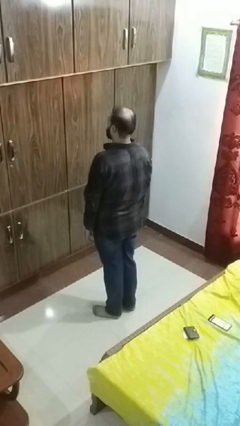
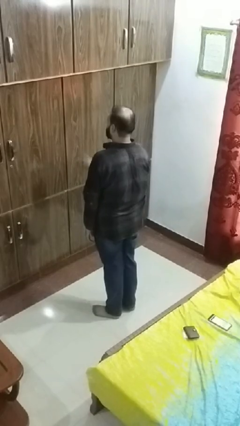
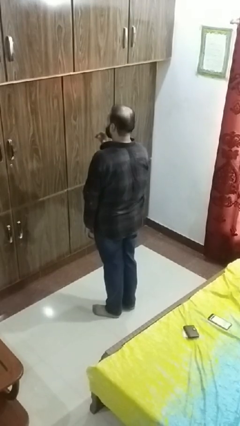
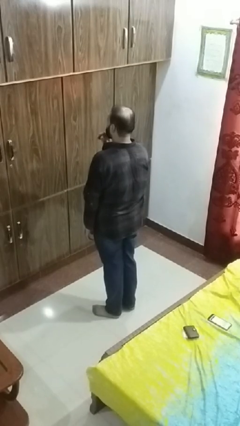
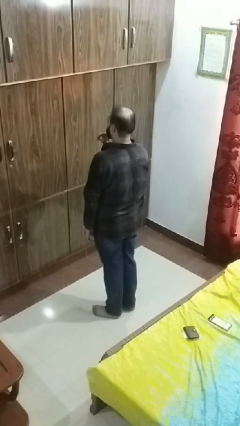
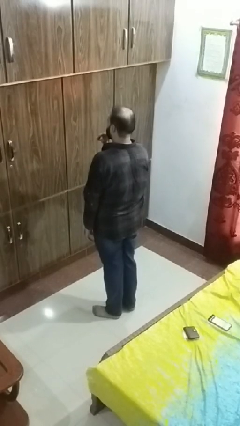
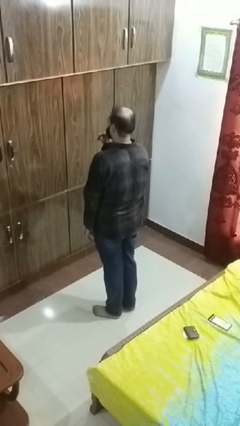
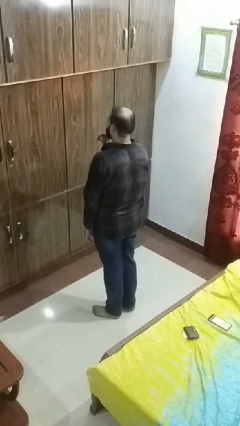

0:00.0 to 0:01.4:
person gestures be quiet

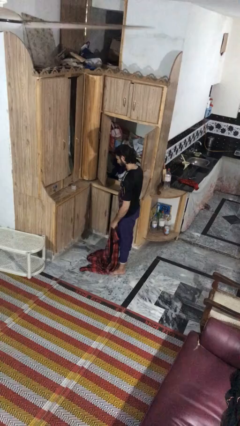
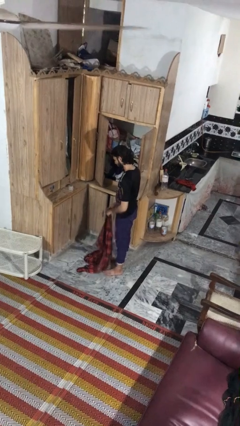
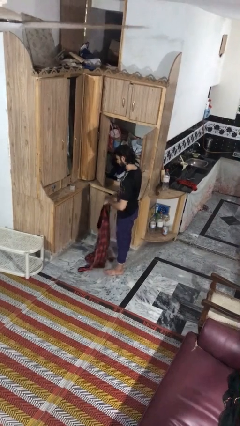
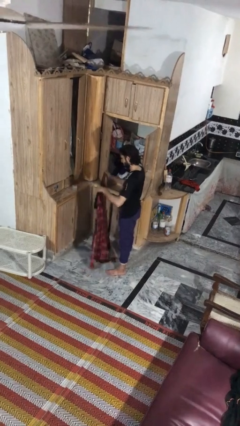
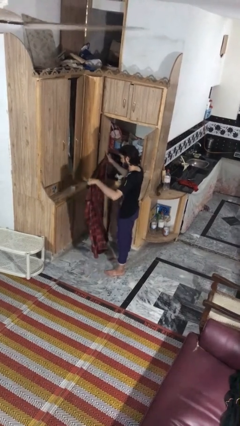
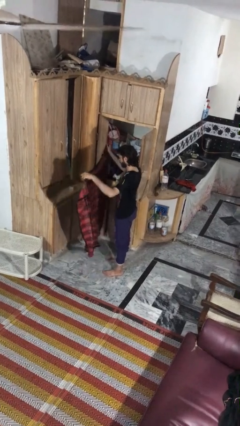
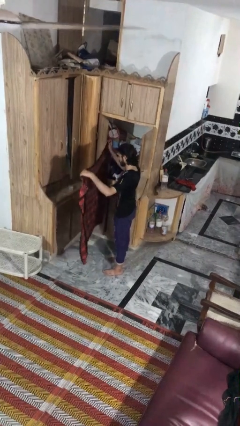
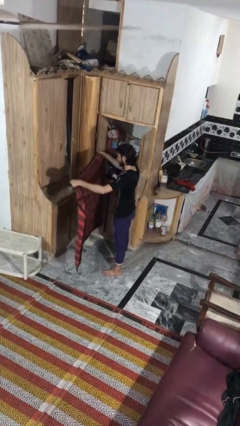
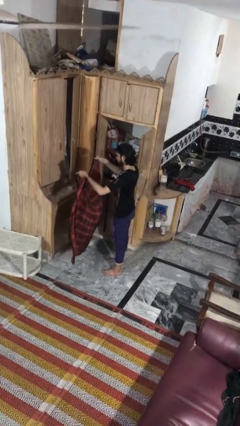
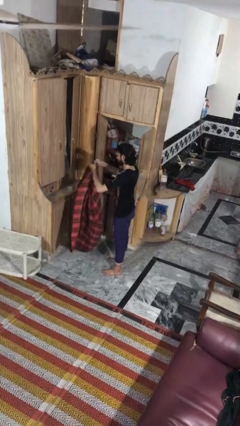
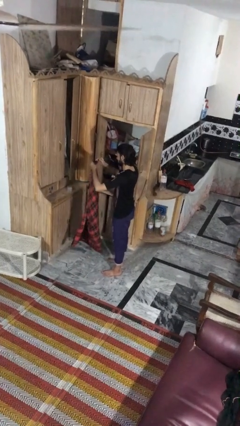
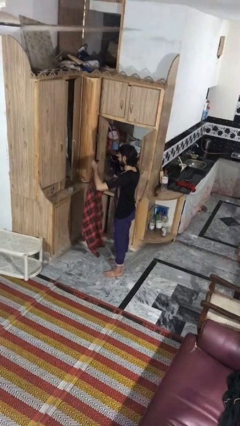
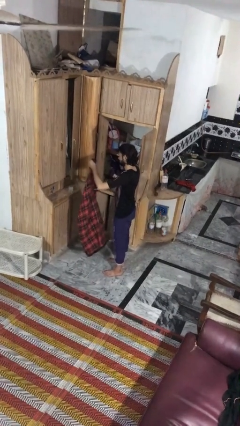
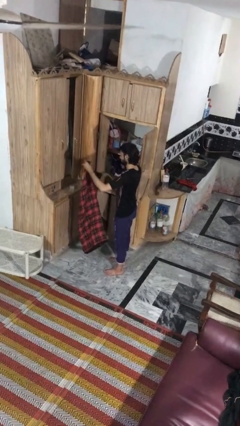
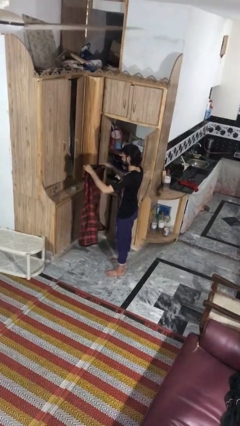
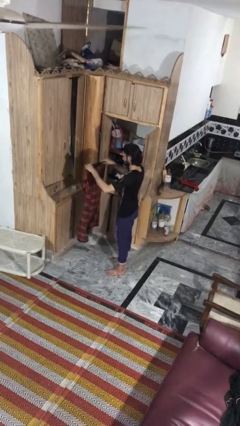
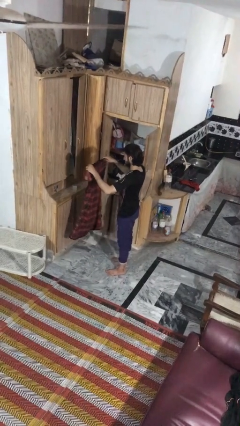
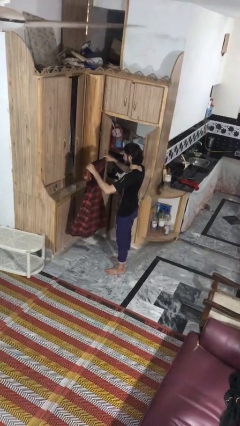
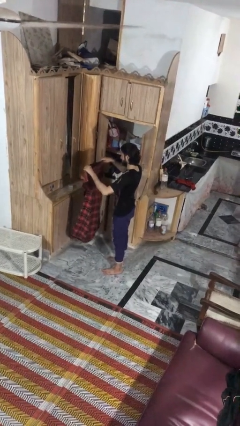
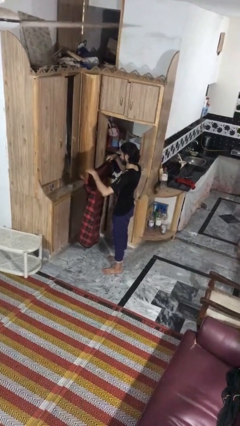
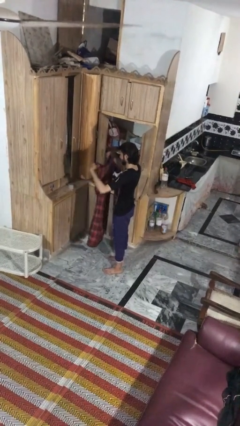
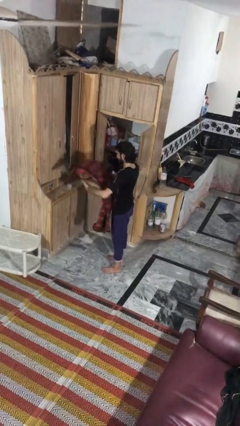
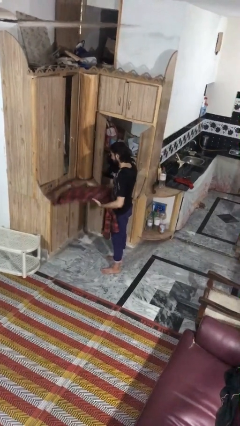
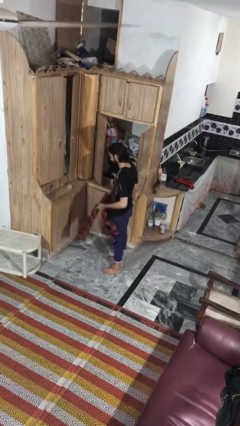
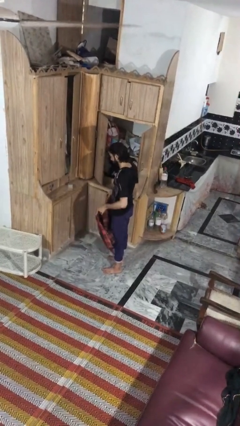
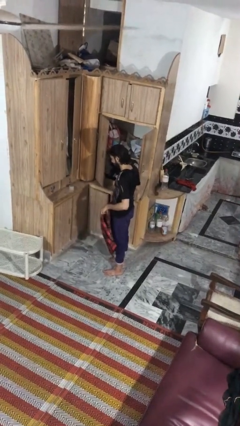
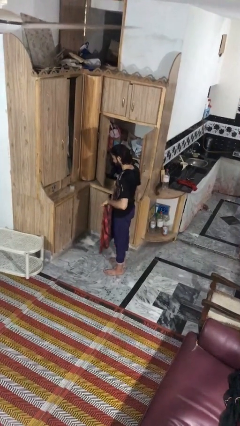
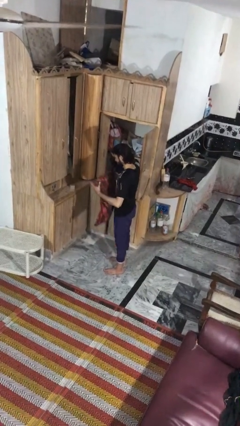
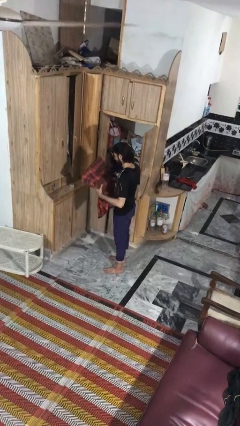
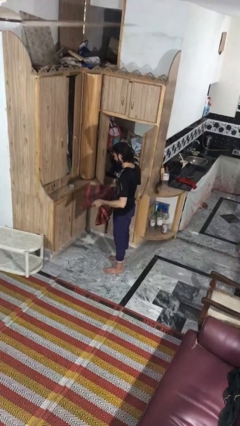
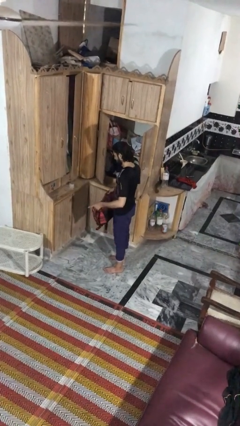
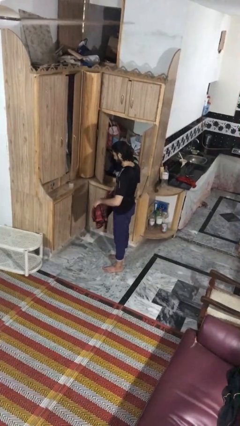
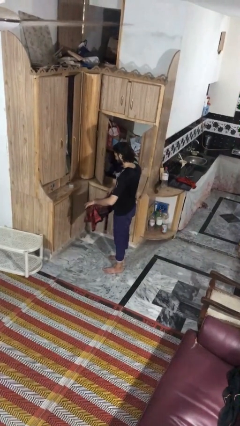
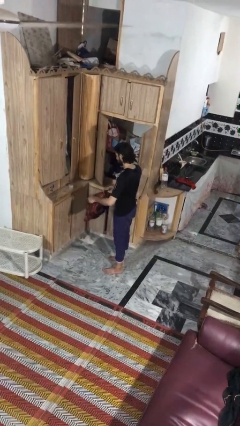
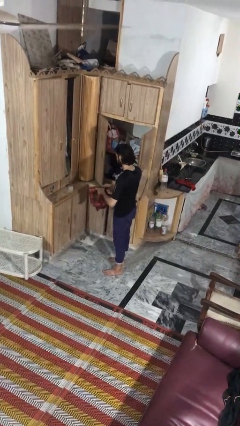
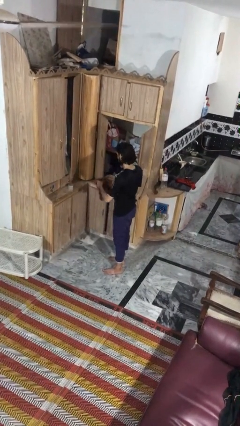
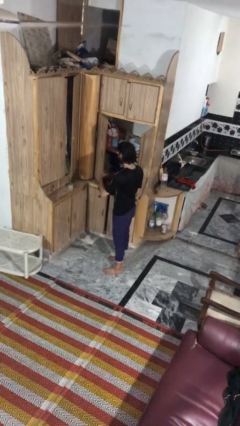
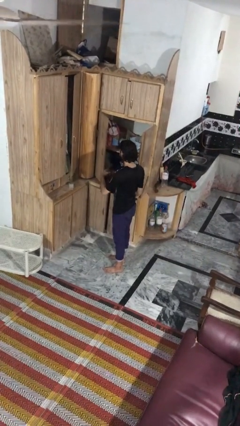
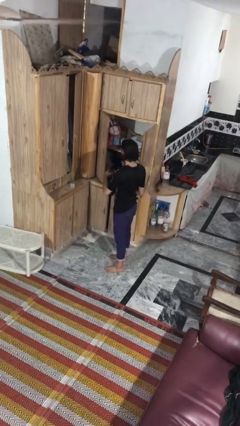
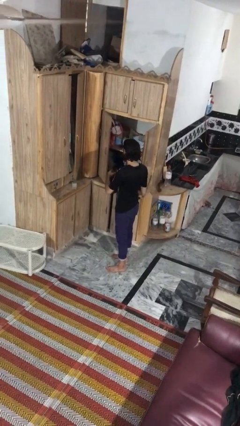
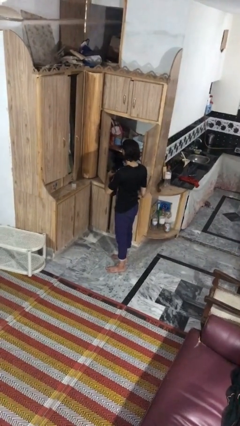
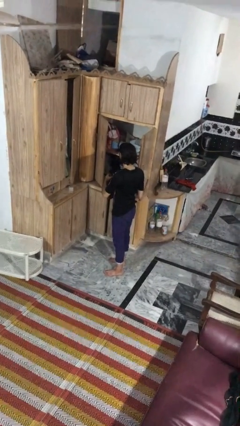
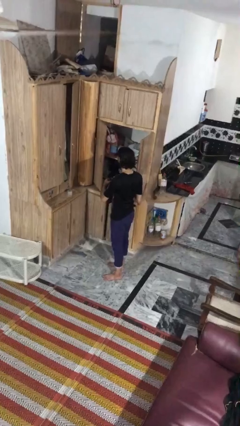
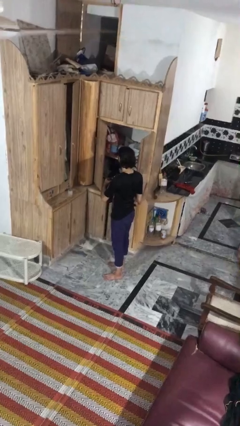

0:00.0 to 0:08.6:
person folds blanket

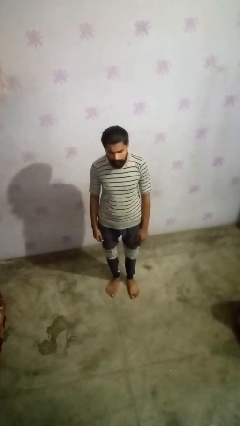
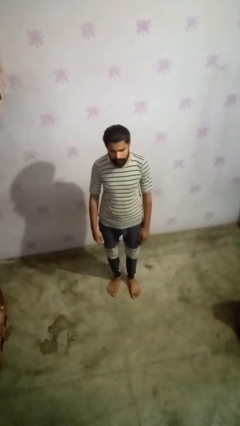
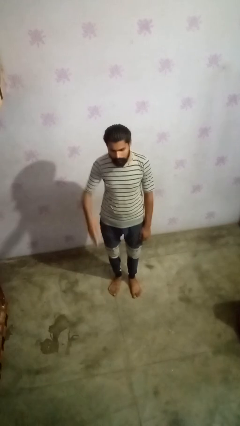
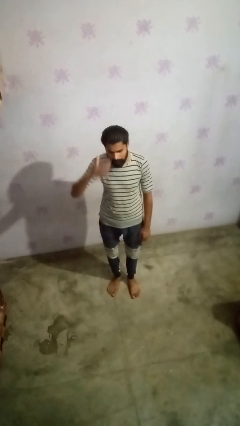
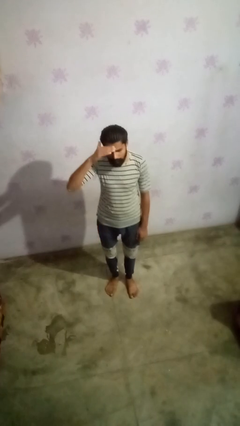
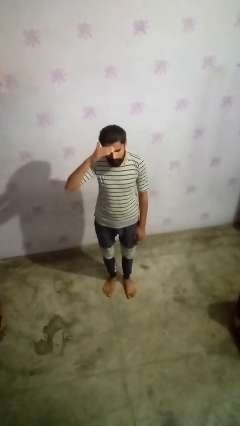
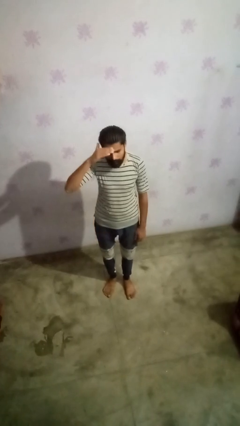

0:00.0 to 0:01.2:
person salutes

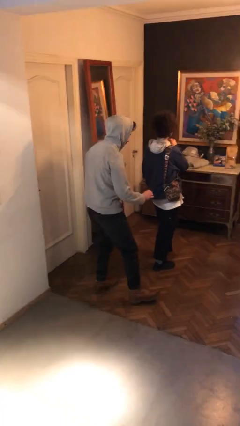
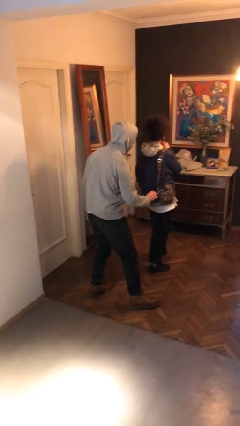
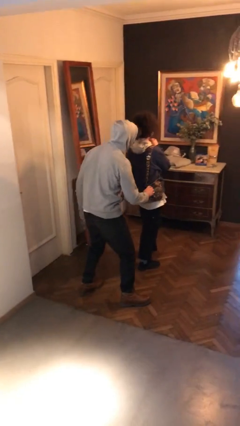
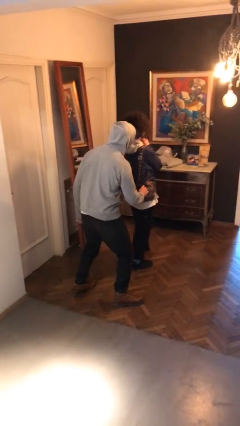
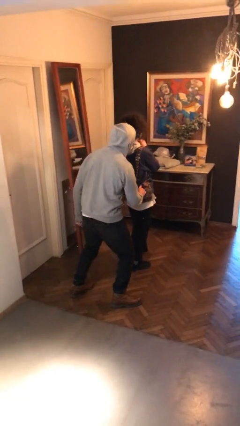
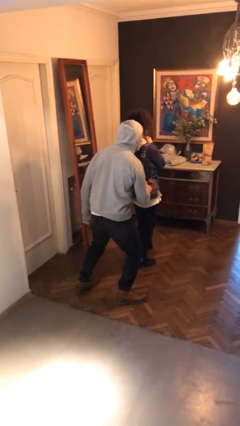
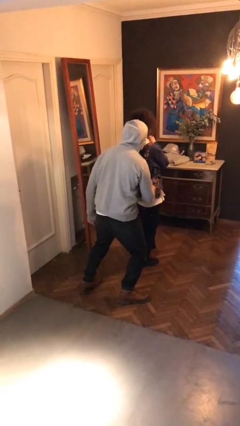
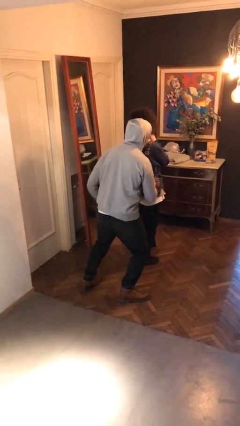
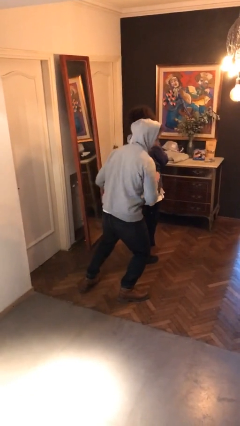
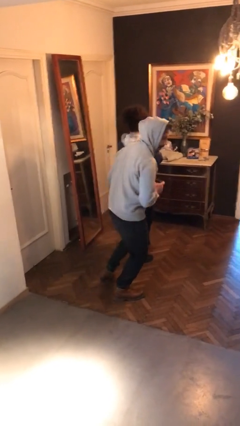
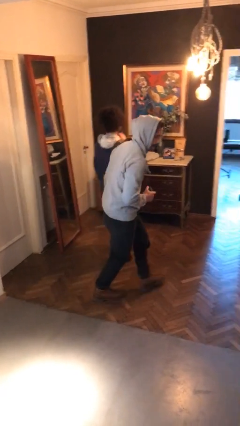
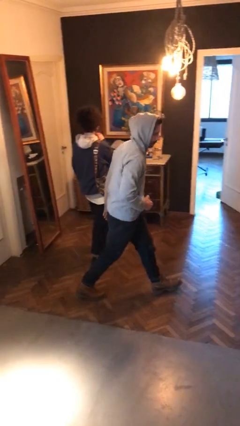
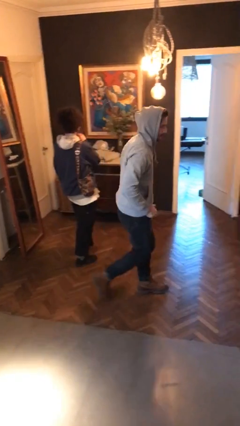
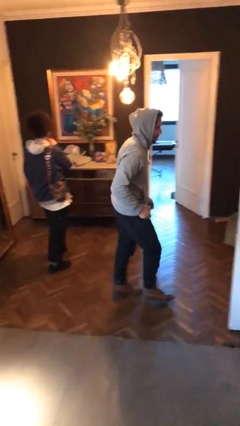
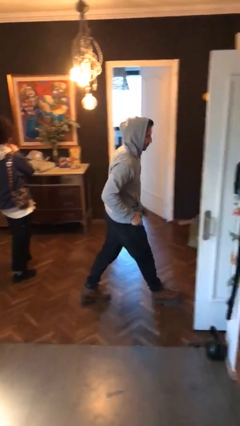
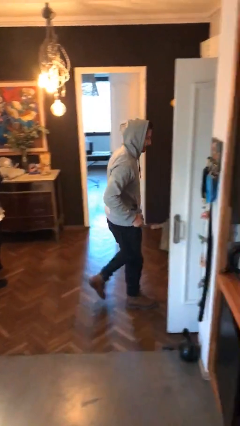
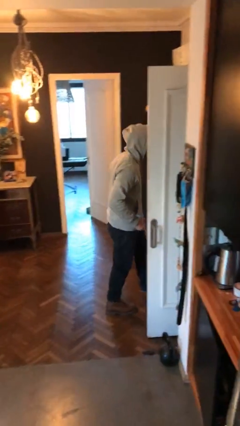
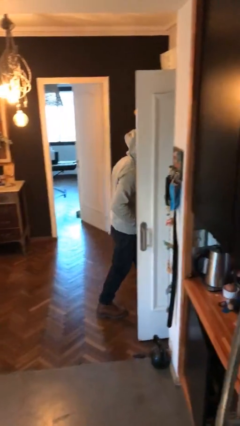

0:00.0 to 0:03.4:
person steals object from person

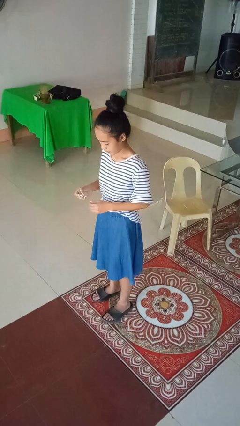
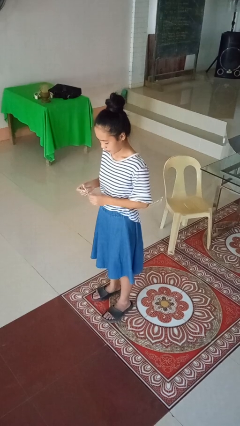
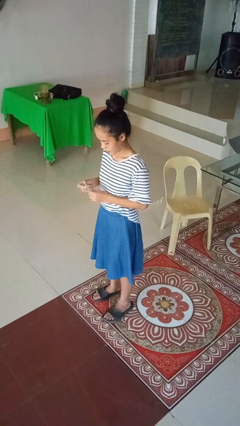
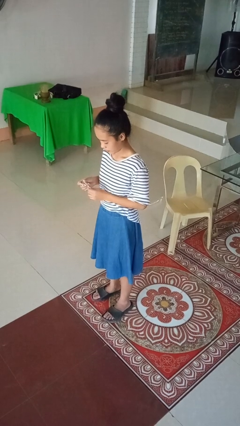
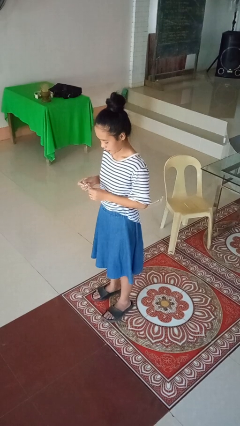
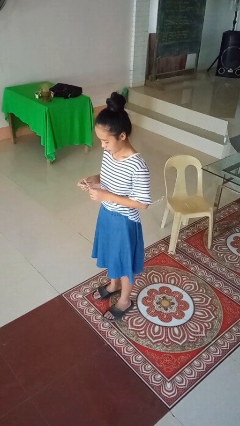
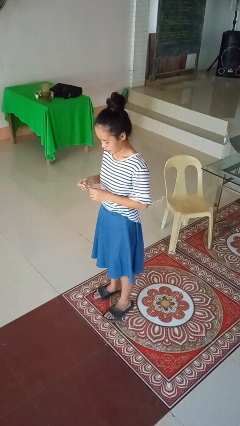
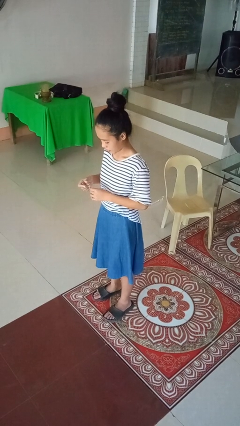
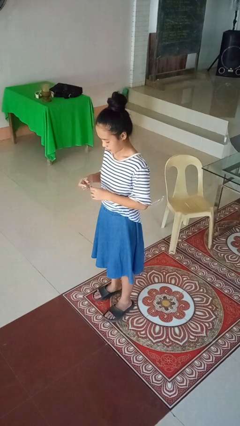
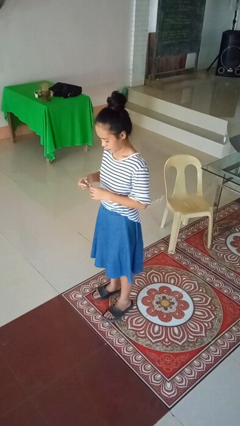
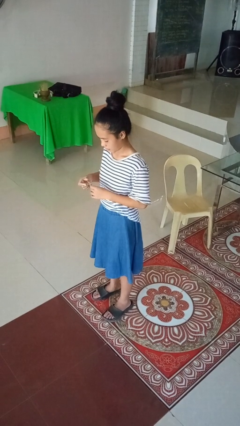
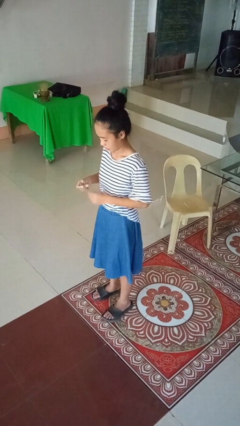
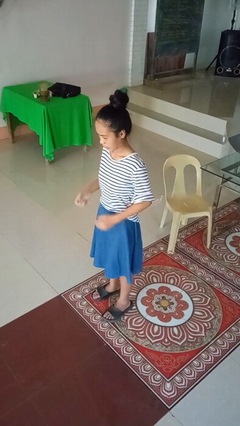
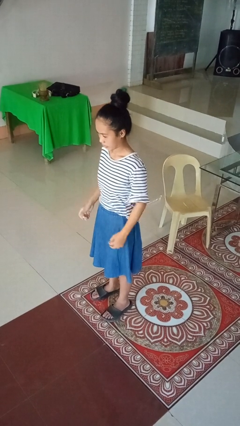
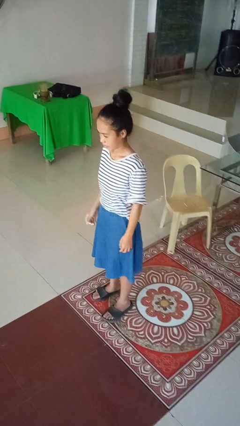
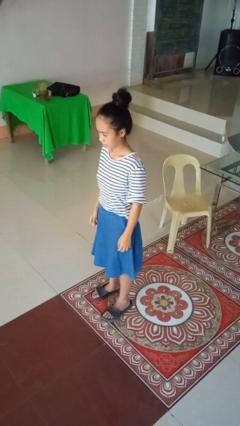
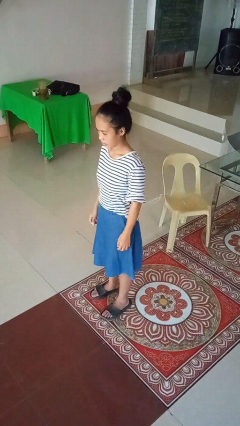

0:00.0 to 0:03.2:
person clips fingernails
